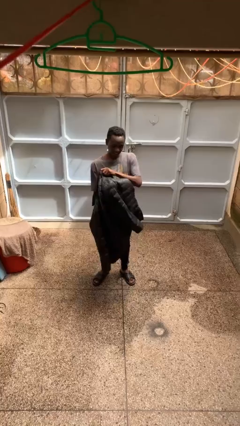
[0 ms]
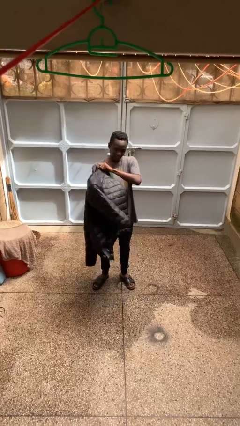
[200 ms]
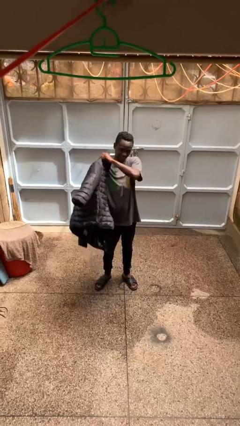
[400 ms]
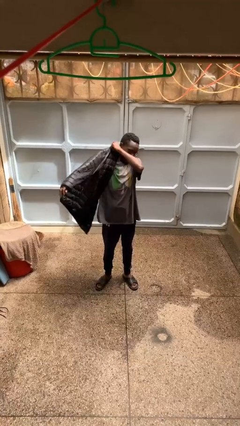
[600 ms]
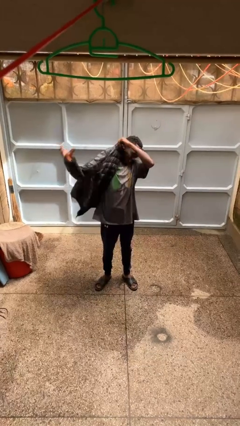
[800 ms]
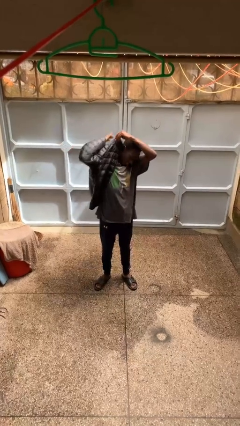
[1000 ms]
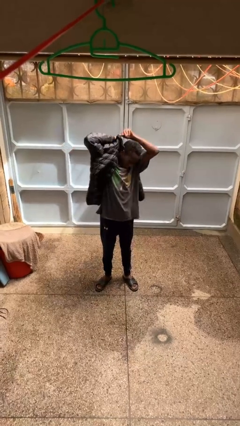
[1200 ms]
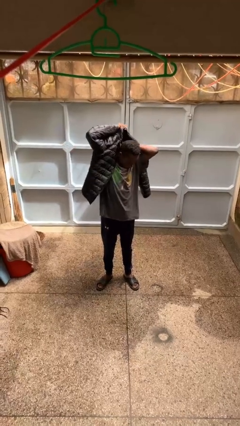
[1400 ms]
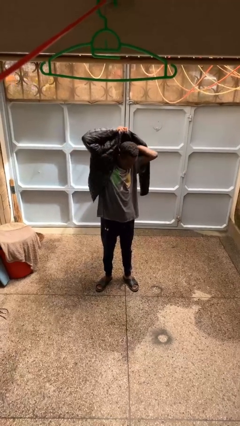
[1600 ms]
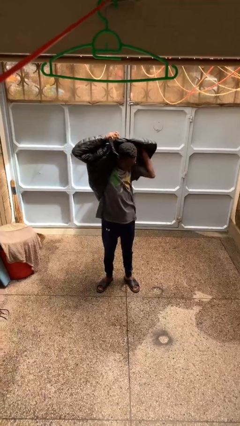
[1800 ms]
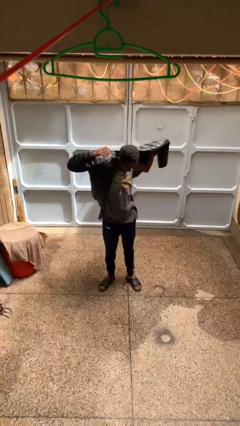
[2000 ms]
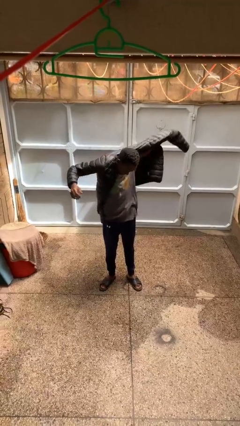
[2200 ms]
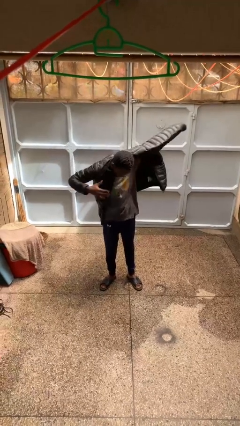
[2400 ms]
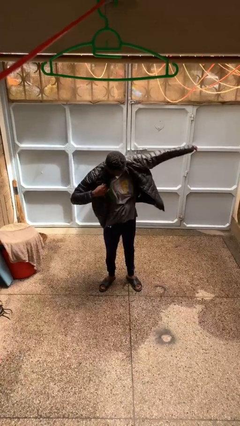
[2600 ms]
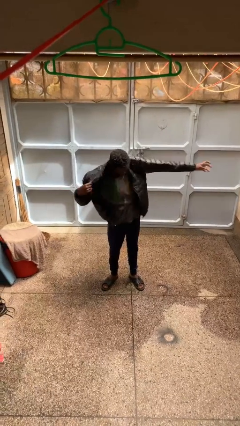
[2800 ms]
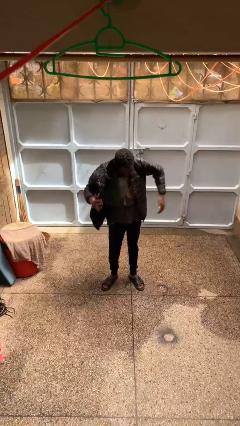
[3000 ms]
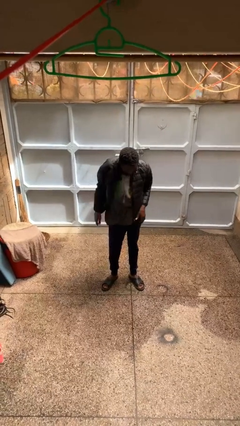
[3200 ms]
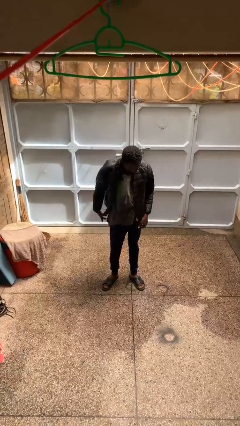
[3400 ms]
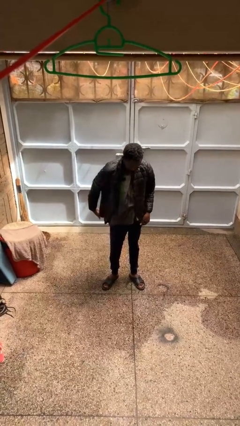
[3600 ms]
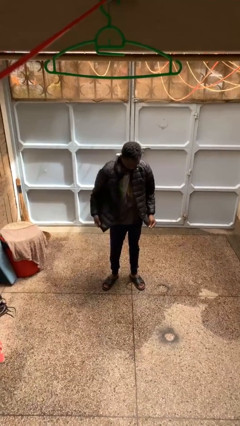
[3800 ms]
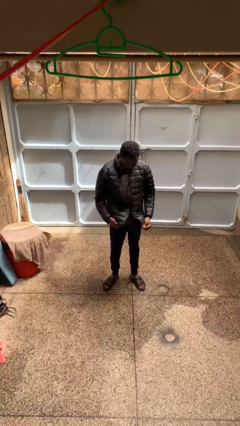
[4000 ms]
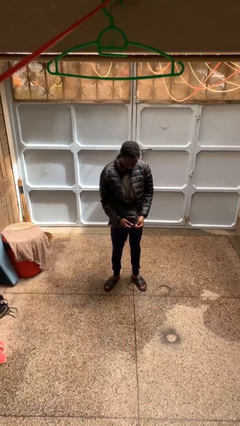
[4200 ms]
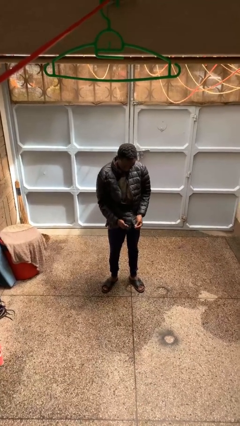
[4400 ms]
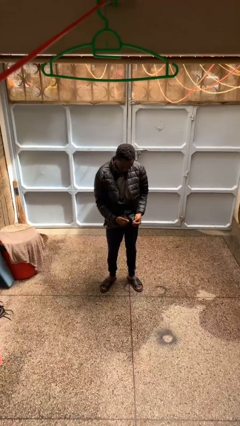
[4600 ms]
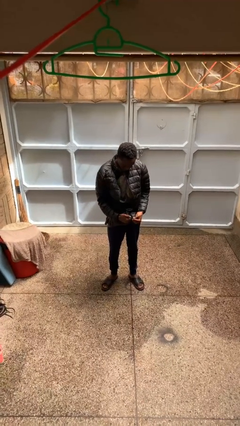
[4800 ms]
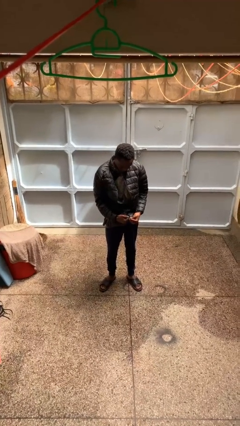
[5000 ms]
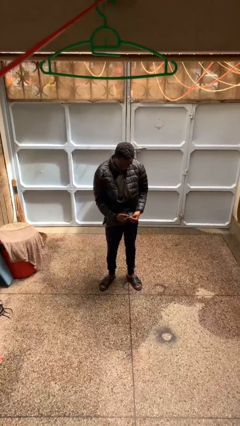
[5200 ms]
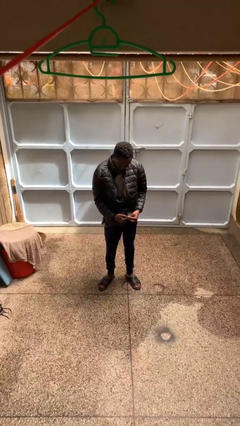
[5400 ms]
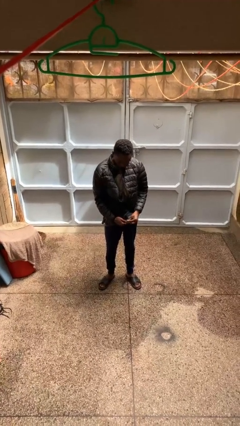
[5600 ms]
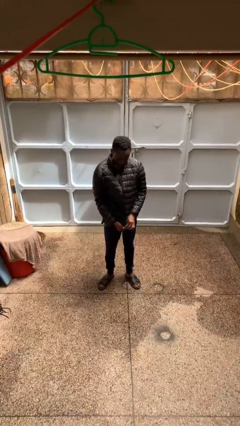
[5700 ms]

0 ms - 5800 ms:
person puts on jacket

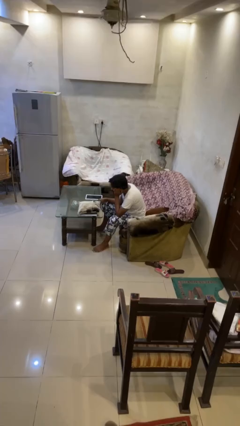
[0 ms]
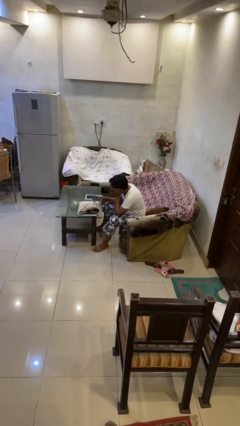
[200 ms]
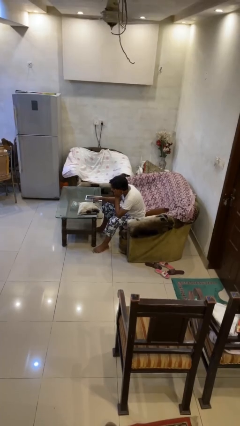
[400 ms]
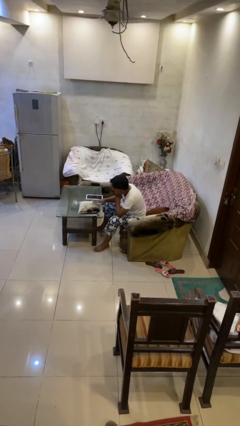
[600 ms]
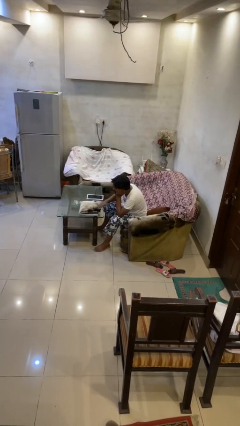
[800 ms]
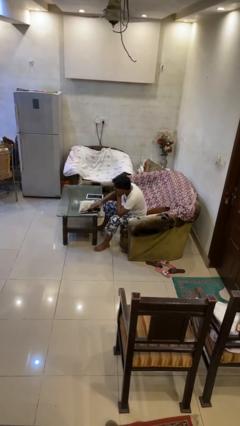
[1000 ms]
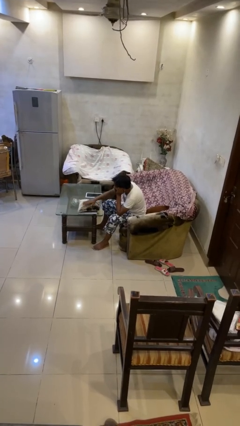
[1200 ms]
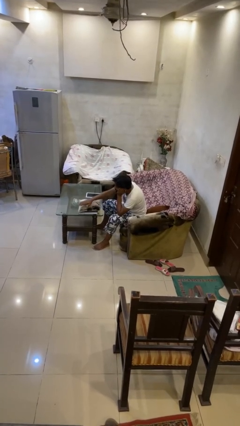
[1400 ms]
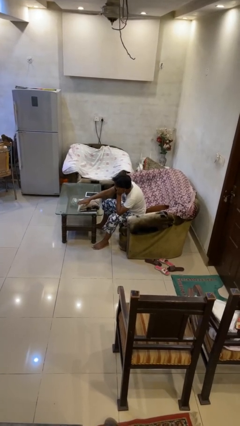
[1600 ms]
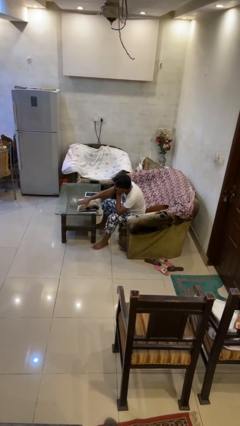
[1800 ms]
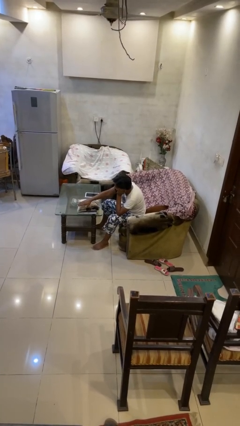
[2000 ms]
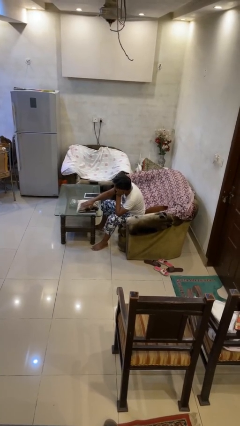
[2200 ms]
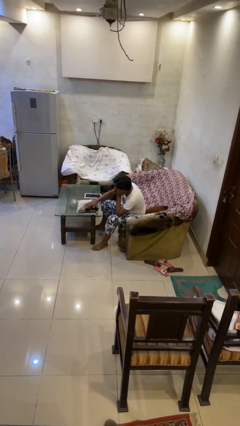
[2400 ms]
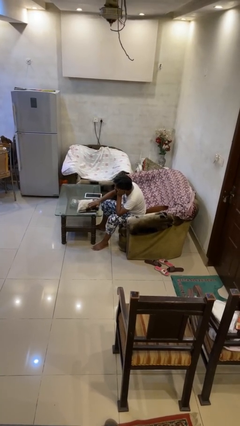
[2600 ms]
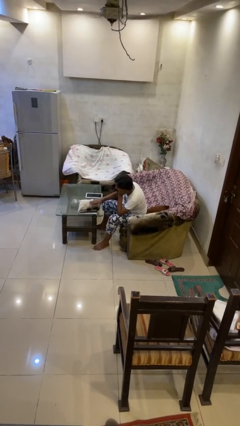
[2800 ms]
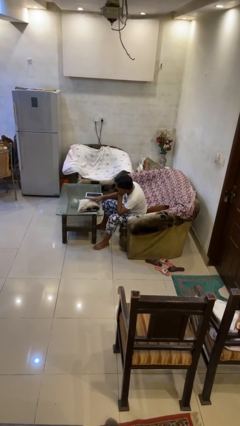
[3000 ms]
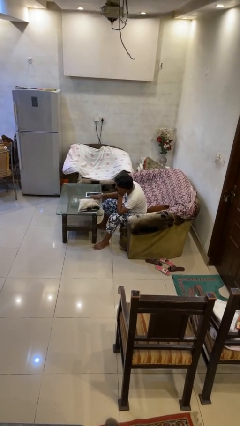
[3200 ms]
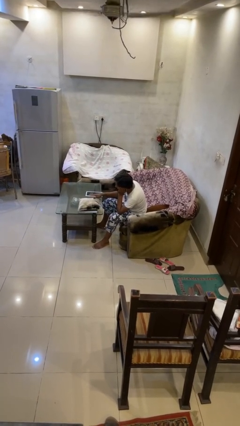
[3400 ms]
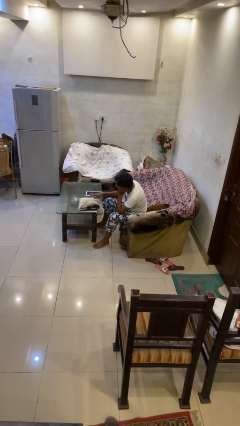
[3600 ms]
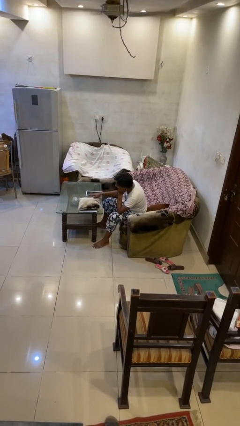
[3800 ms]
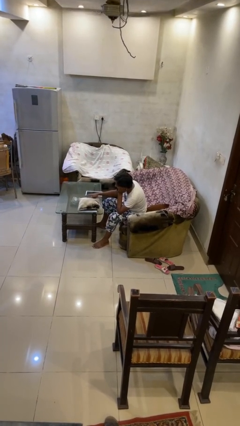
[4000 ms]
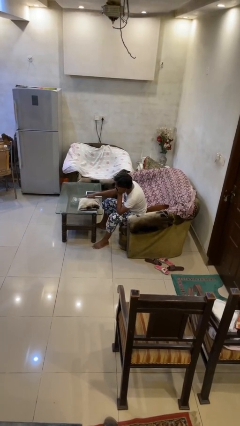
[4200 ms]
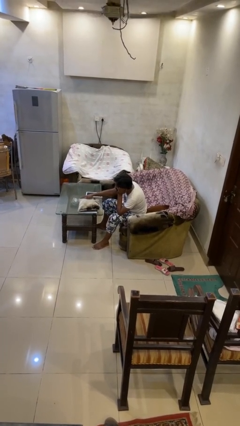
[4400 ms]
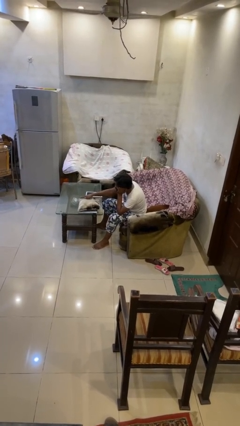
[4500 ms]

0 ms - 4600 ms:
person waves hand over object

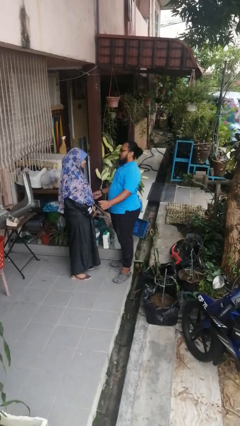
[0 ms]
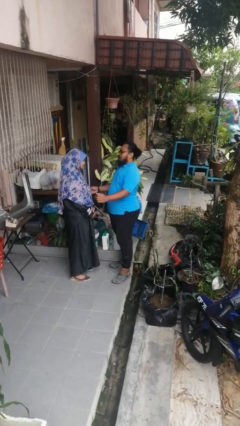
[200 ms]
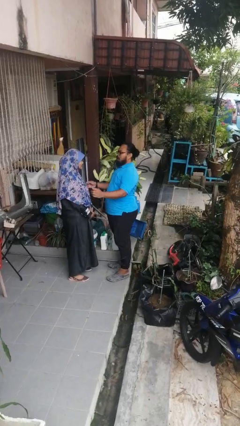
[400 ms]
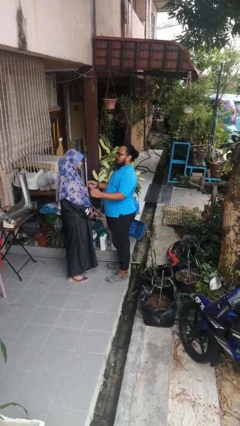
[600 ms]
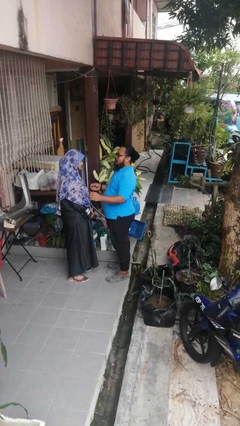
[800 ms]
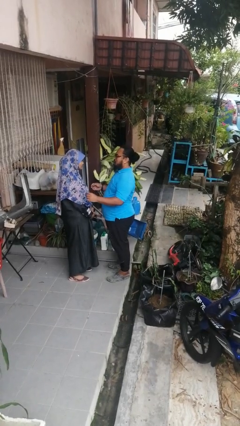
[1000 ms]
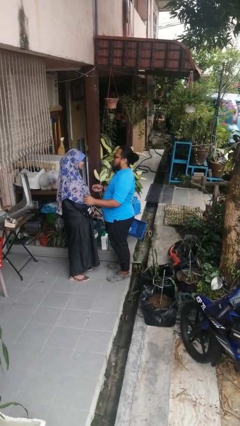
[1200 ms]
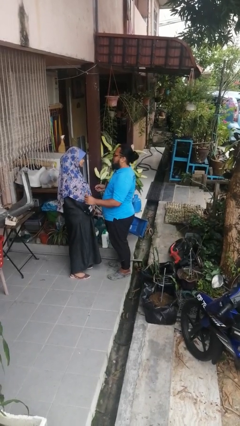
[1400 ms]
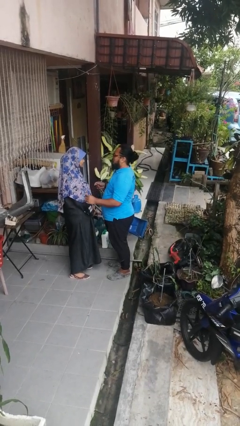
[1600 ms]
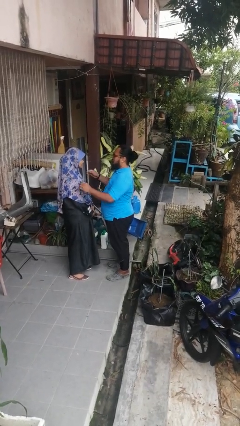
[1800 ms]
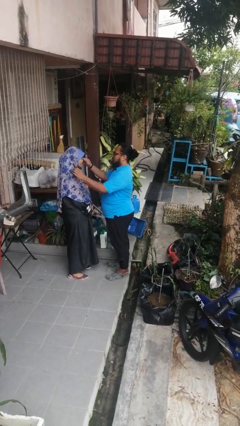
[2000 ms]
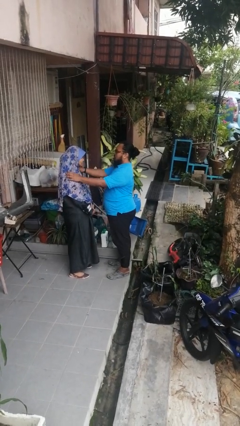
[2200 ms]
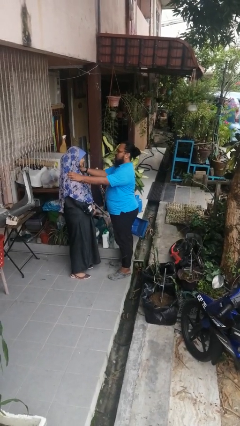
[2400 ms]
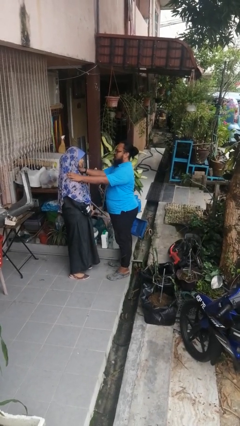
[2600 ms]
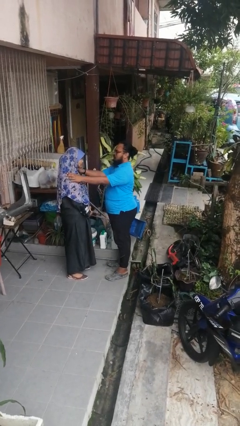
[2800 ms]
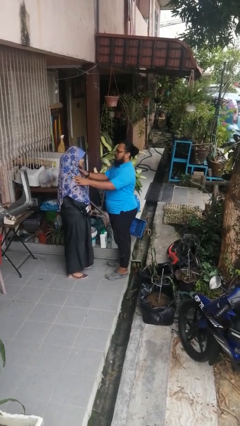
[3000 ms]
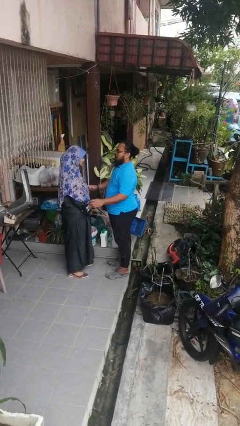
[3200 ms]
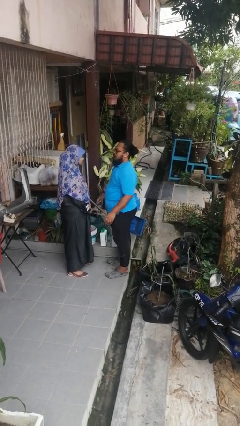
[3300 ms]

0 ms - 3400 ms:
person pounds shoulders of person

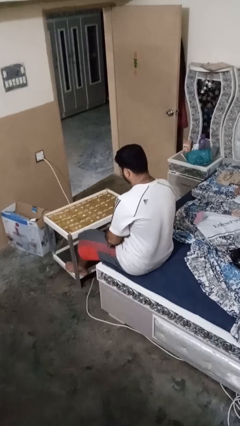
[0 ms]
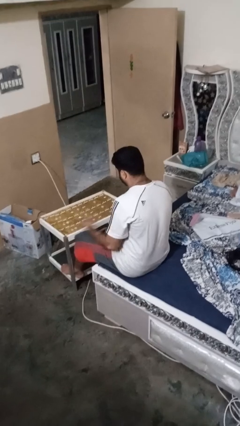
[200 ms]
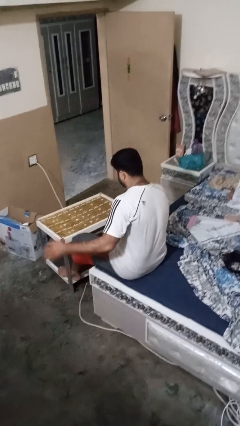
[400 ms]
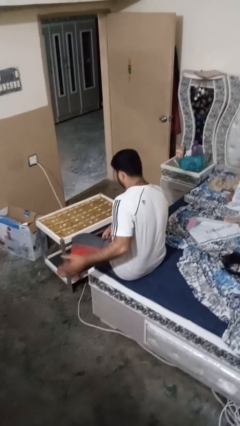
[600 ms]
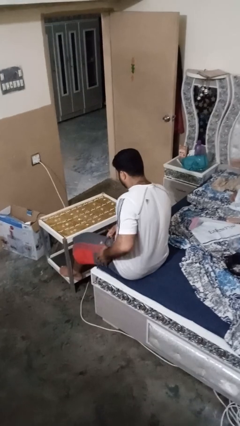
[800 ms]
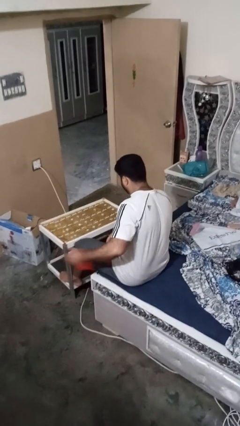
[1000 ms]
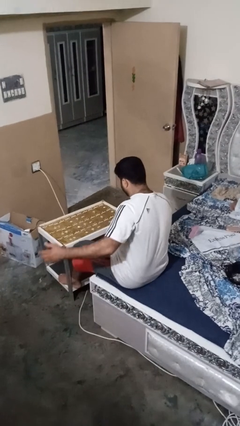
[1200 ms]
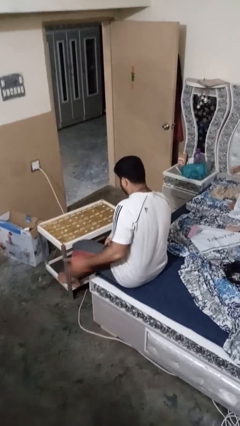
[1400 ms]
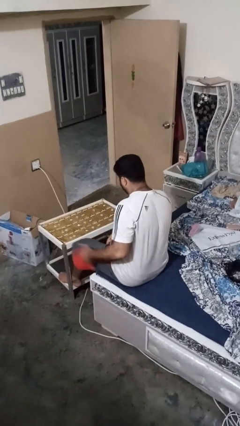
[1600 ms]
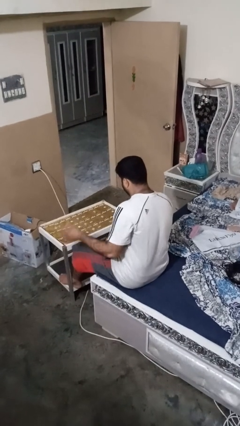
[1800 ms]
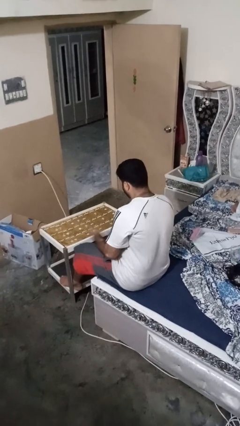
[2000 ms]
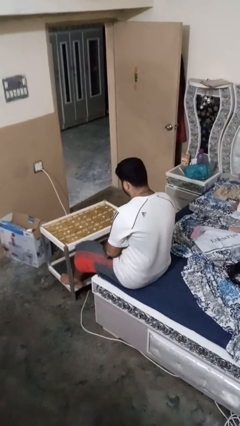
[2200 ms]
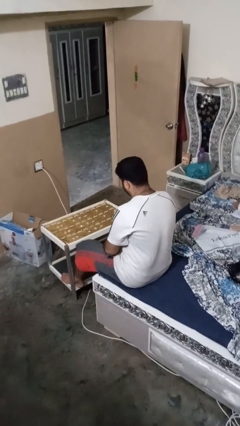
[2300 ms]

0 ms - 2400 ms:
person slaps hands on thighs

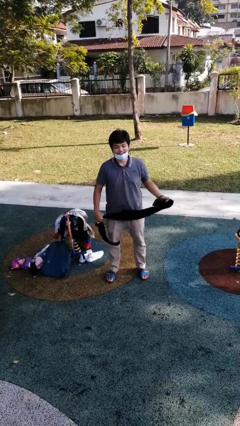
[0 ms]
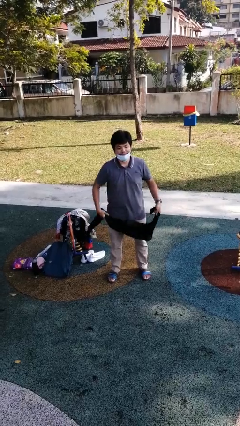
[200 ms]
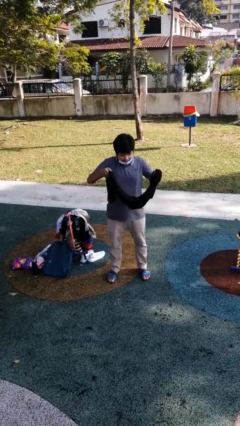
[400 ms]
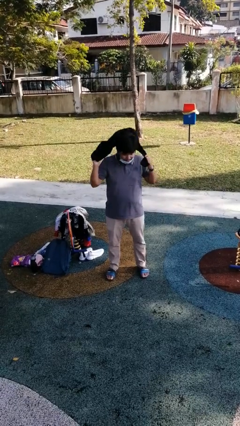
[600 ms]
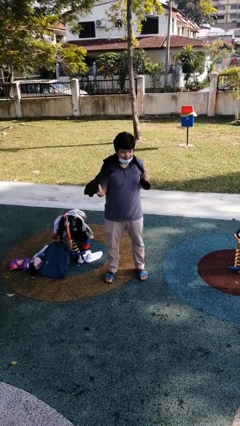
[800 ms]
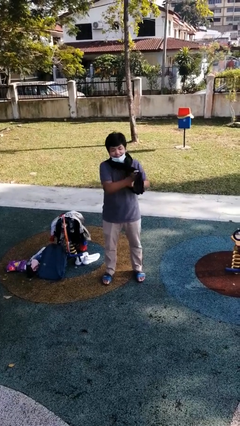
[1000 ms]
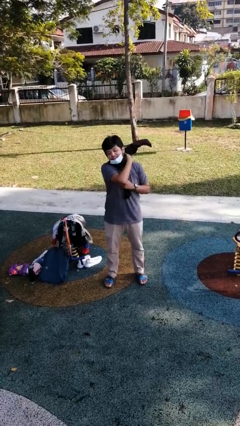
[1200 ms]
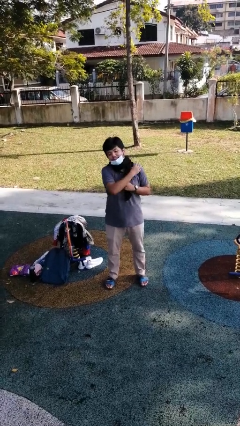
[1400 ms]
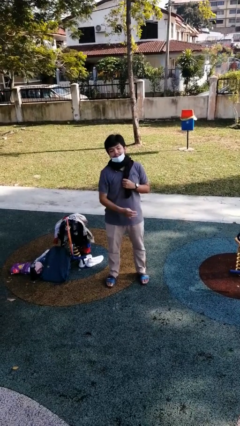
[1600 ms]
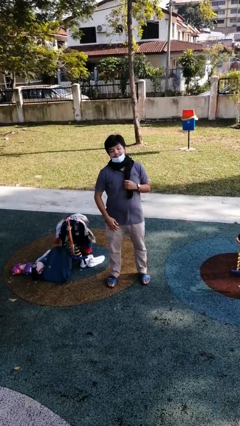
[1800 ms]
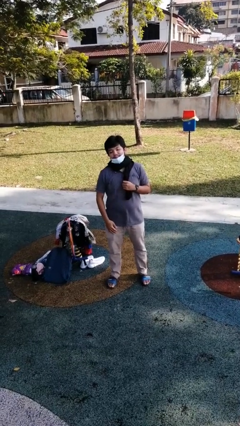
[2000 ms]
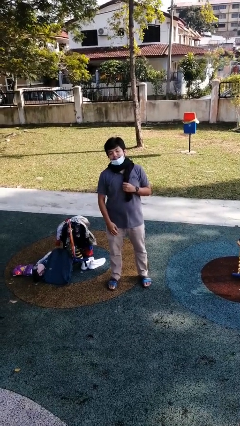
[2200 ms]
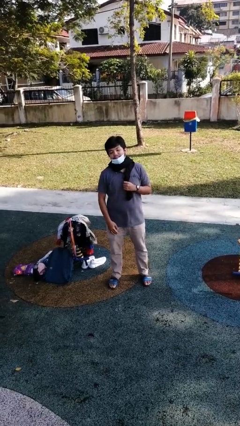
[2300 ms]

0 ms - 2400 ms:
person puts on scarf
